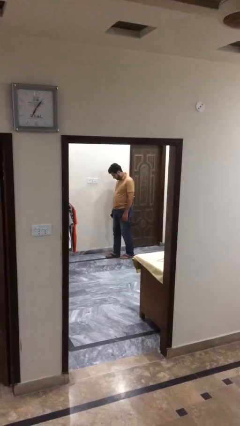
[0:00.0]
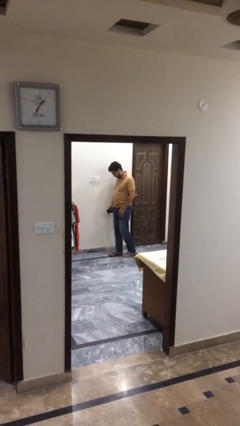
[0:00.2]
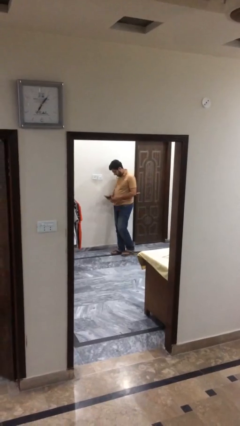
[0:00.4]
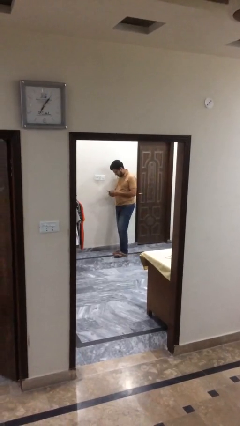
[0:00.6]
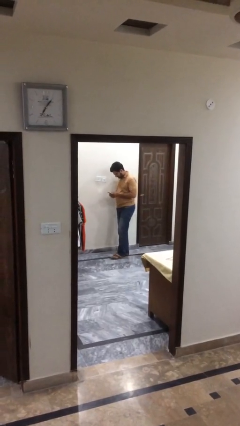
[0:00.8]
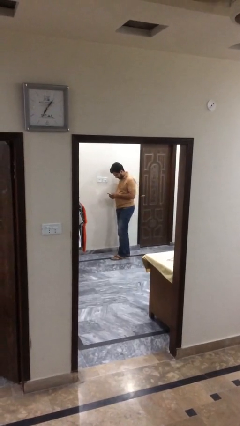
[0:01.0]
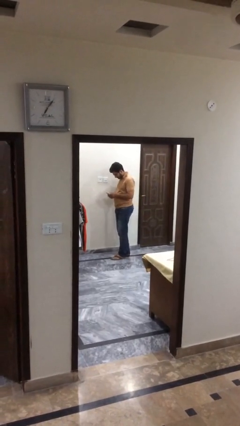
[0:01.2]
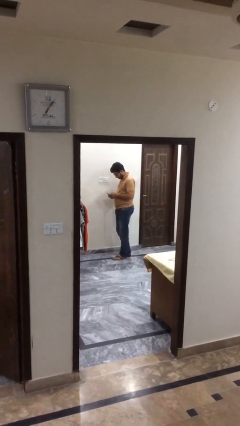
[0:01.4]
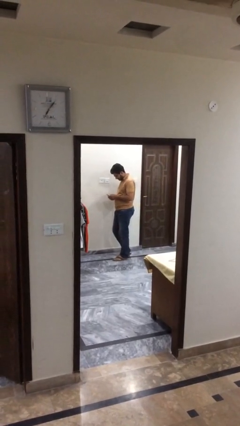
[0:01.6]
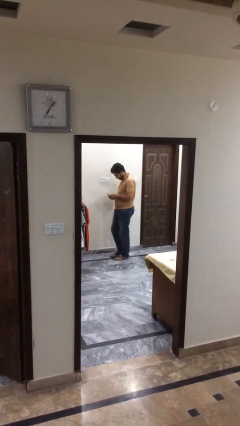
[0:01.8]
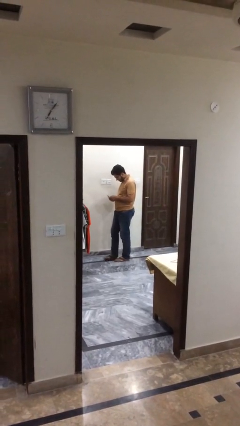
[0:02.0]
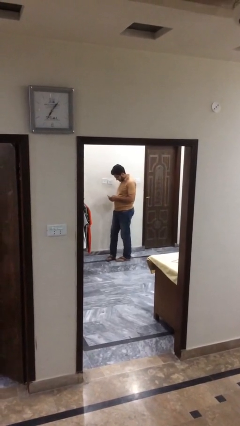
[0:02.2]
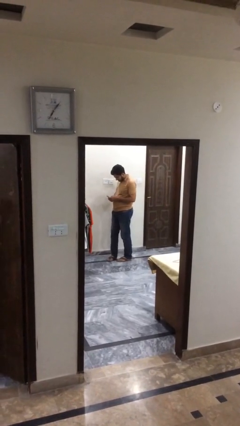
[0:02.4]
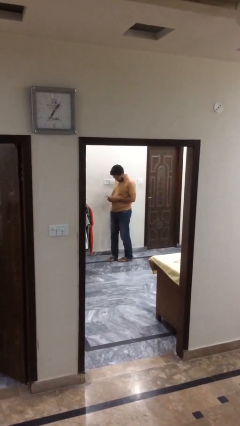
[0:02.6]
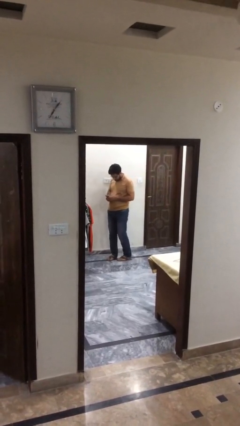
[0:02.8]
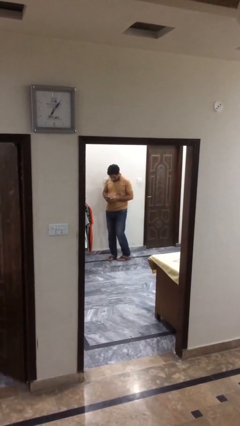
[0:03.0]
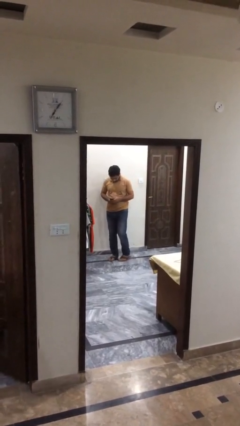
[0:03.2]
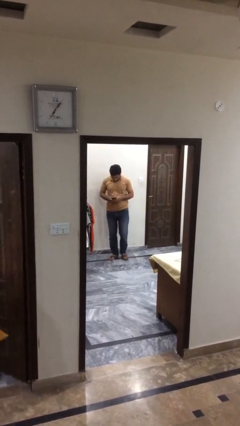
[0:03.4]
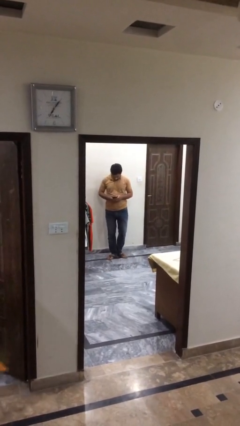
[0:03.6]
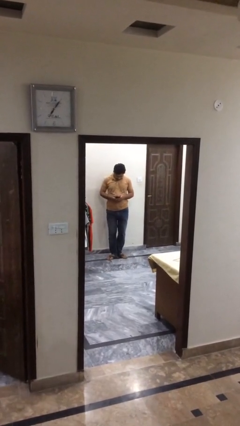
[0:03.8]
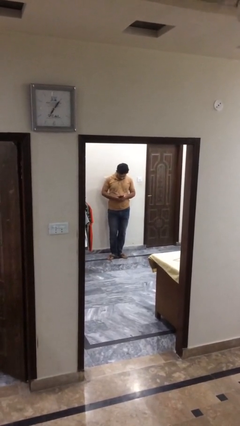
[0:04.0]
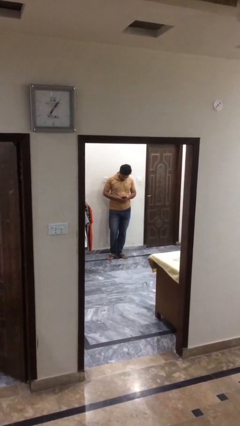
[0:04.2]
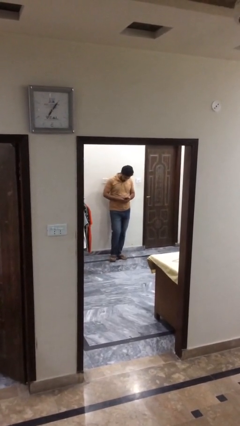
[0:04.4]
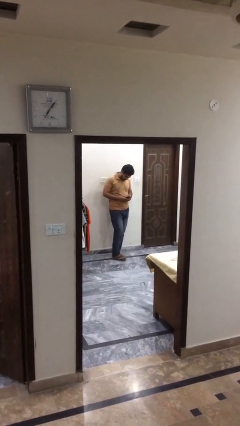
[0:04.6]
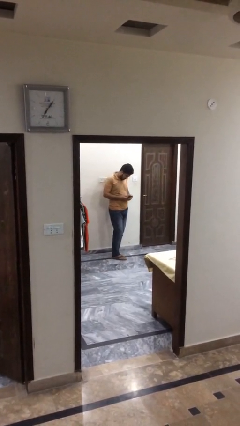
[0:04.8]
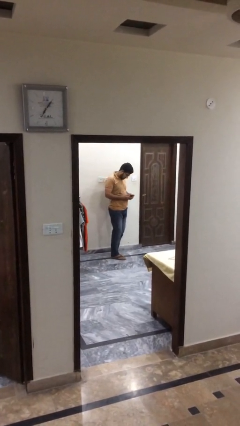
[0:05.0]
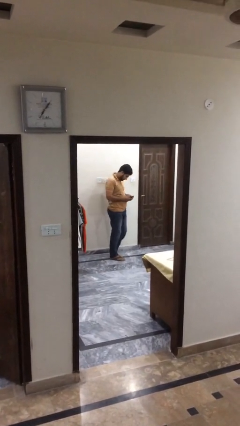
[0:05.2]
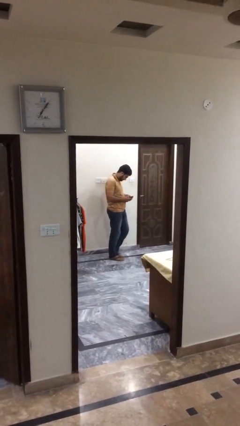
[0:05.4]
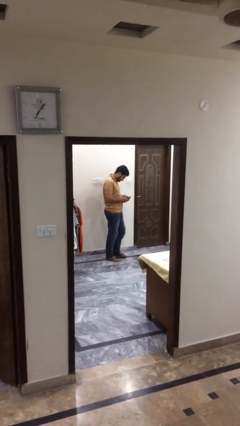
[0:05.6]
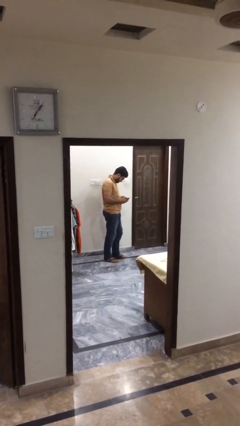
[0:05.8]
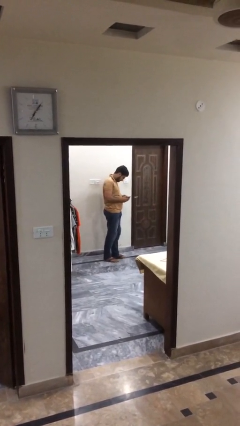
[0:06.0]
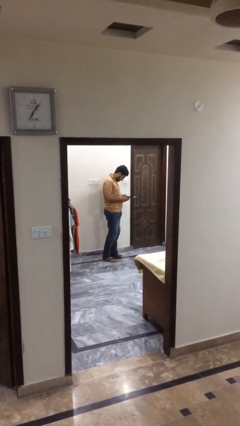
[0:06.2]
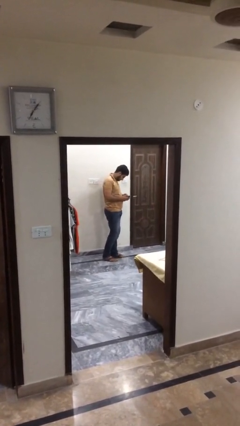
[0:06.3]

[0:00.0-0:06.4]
person texts on phone

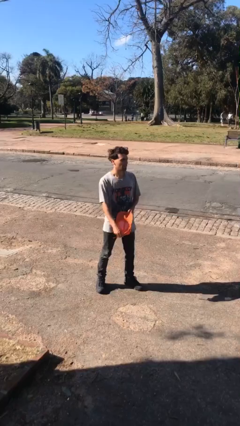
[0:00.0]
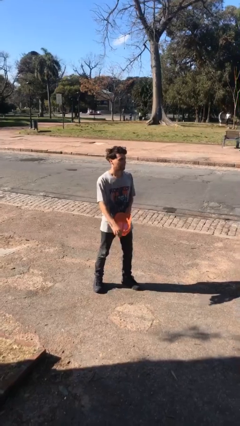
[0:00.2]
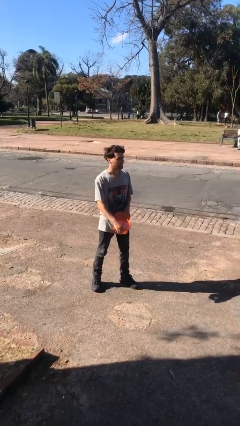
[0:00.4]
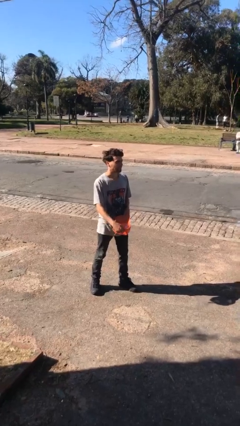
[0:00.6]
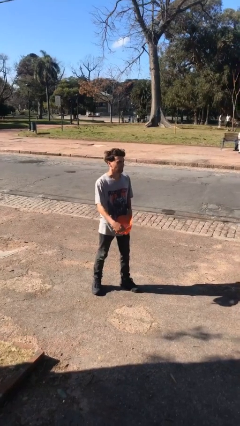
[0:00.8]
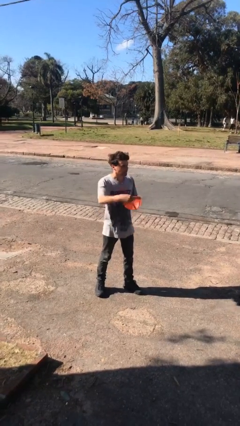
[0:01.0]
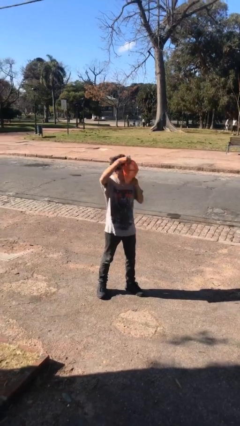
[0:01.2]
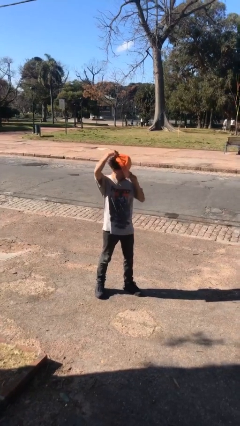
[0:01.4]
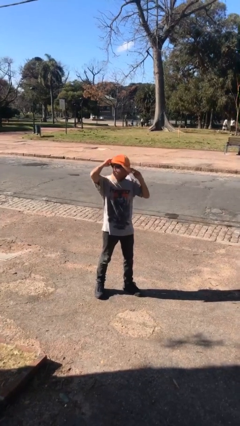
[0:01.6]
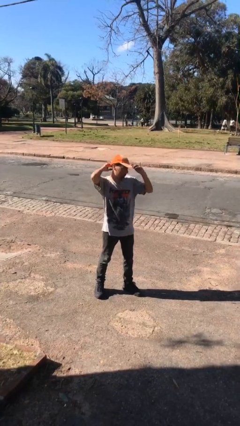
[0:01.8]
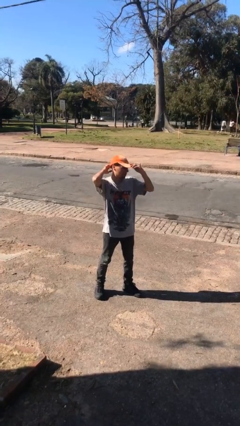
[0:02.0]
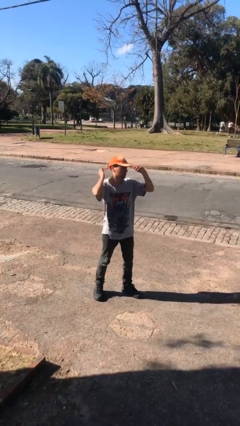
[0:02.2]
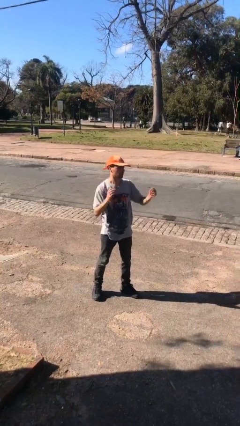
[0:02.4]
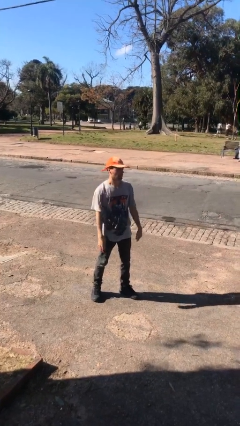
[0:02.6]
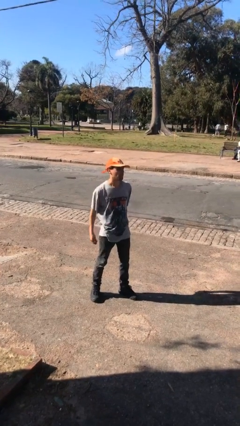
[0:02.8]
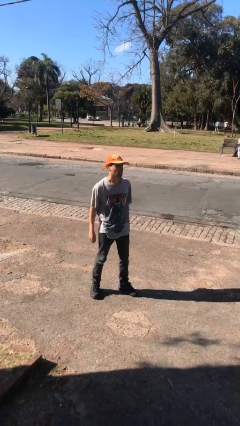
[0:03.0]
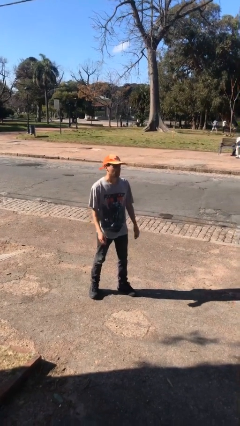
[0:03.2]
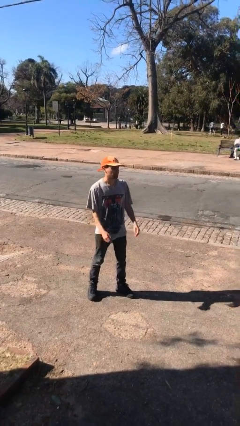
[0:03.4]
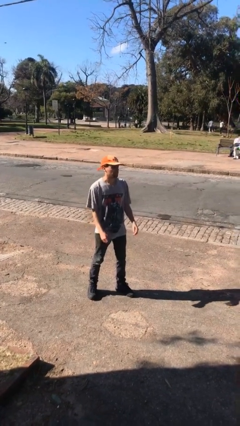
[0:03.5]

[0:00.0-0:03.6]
person puts on hat

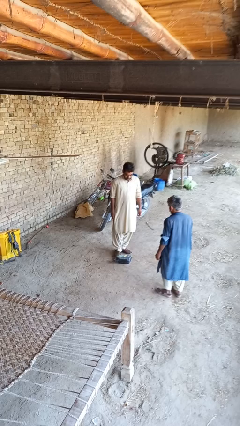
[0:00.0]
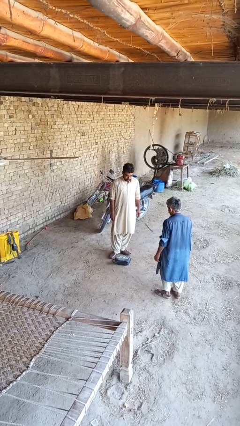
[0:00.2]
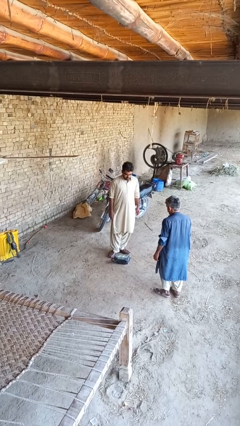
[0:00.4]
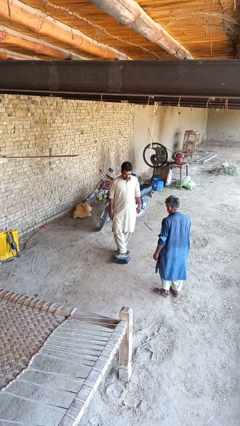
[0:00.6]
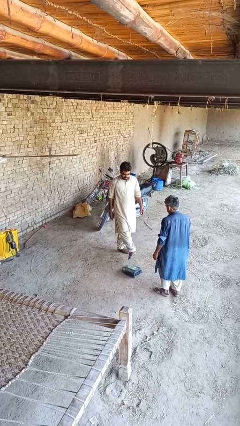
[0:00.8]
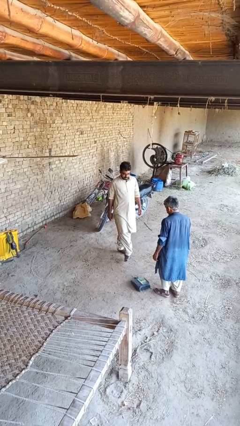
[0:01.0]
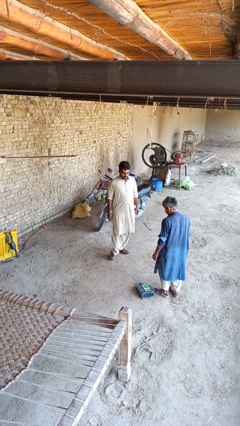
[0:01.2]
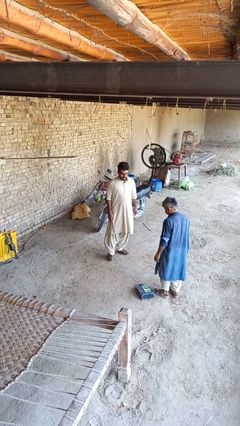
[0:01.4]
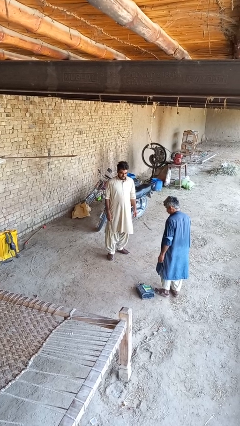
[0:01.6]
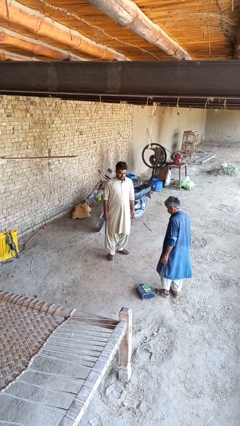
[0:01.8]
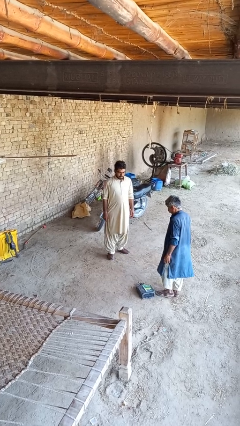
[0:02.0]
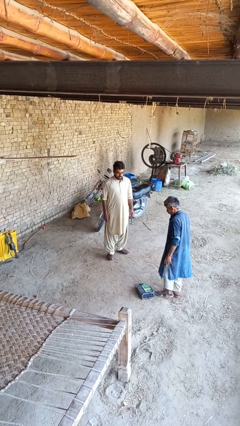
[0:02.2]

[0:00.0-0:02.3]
person kicks object to person

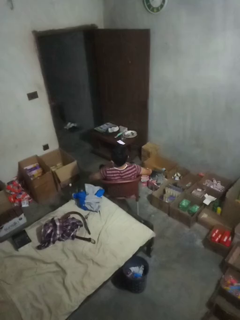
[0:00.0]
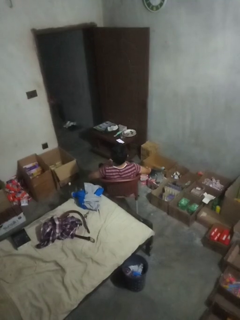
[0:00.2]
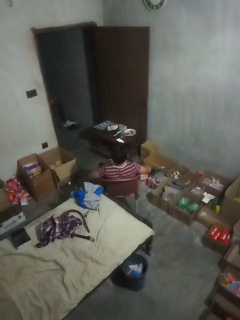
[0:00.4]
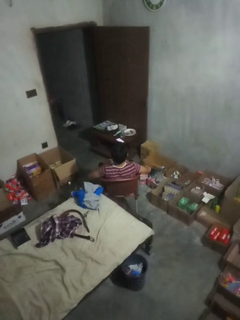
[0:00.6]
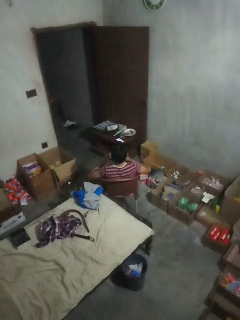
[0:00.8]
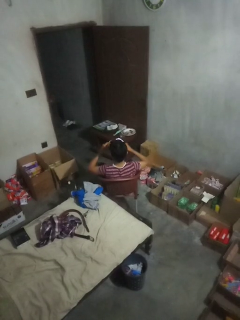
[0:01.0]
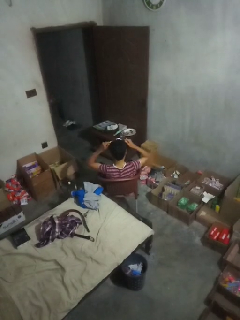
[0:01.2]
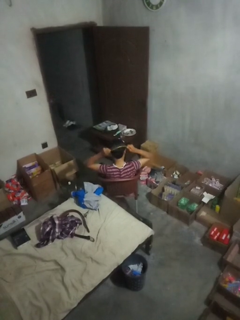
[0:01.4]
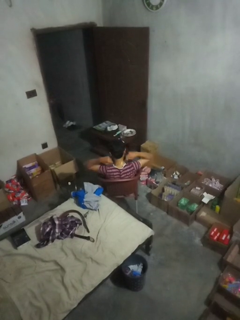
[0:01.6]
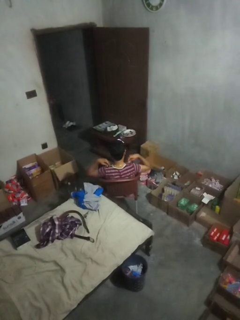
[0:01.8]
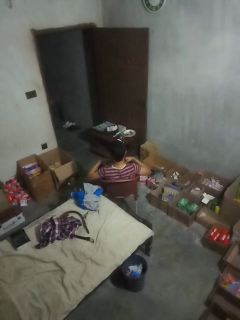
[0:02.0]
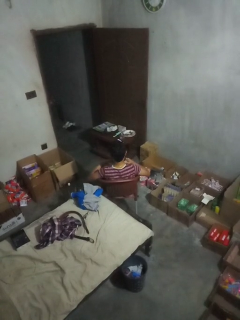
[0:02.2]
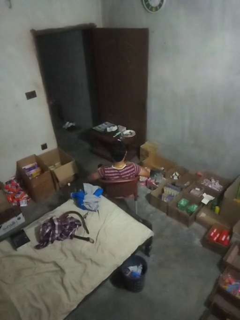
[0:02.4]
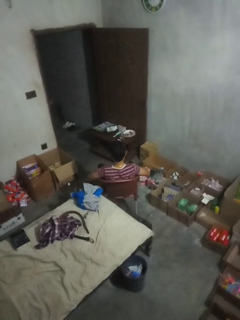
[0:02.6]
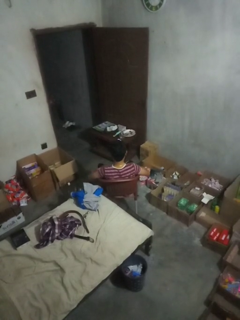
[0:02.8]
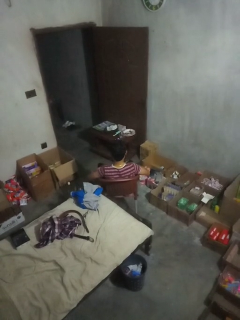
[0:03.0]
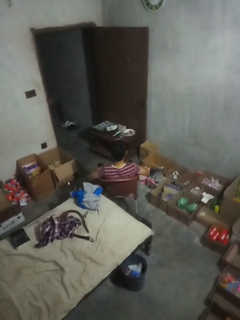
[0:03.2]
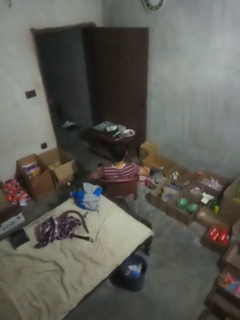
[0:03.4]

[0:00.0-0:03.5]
person puts on necklace

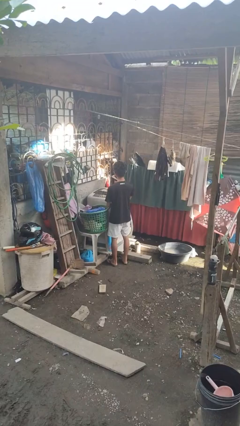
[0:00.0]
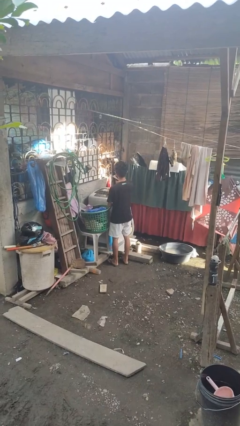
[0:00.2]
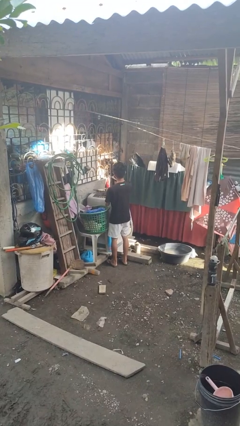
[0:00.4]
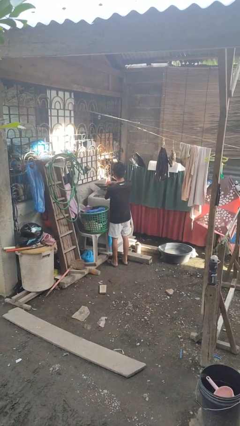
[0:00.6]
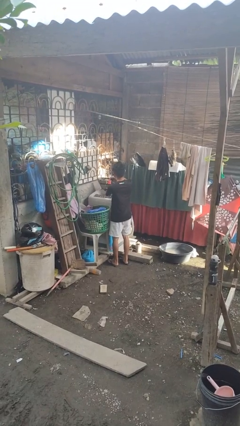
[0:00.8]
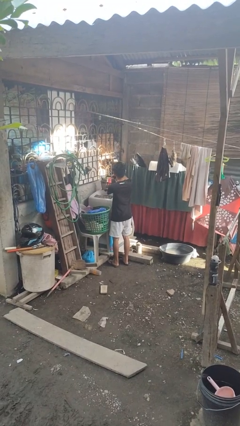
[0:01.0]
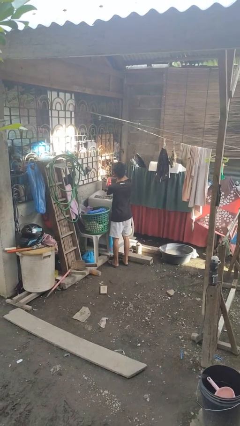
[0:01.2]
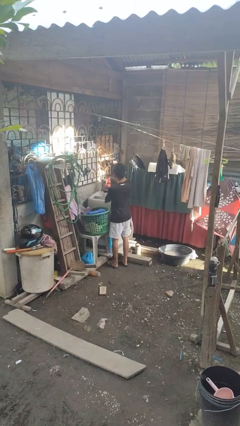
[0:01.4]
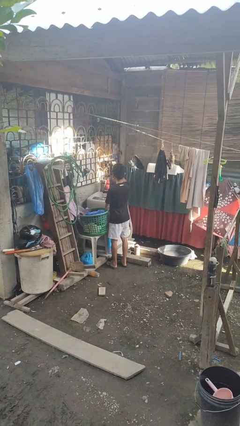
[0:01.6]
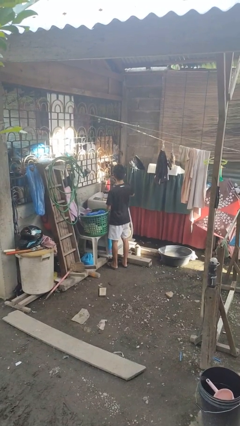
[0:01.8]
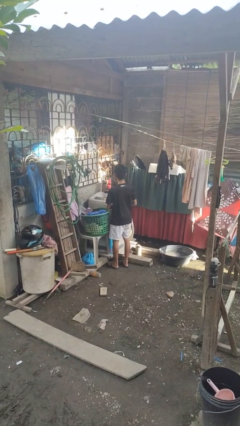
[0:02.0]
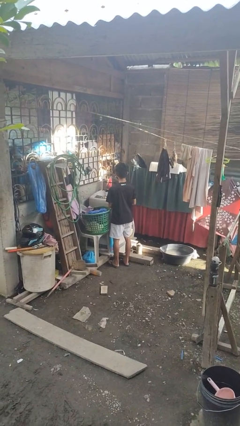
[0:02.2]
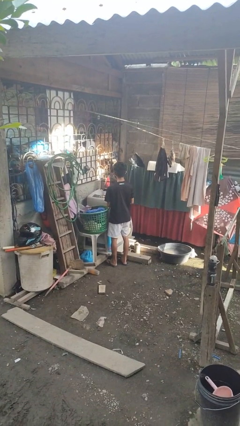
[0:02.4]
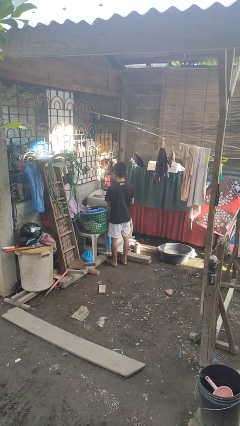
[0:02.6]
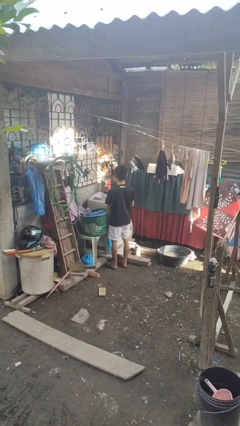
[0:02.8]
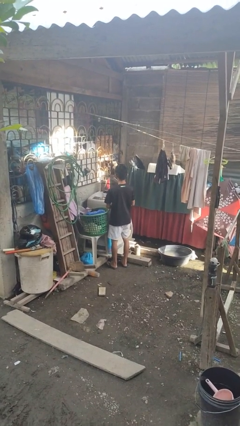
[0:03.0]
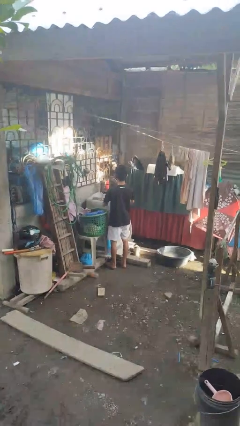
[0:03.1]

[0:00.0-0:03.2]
person opens clothes washer
